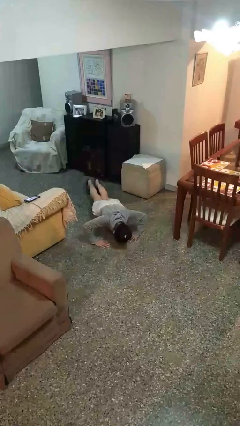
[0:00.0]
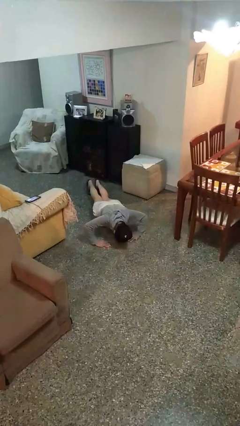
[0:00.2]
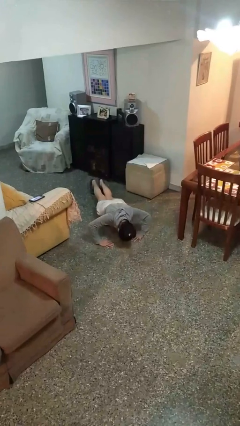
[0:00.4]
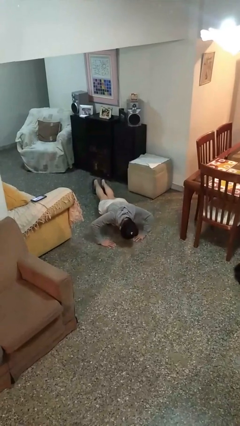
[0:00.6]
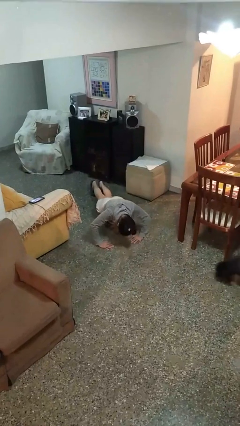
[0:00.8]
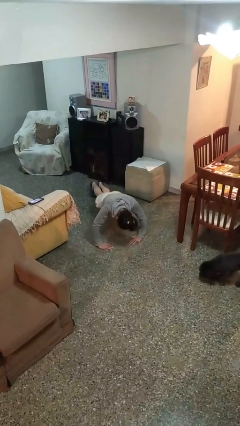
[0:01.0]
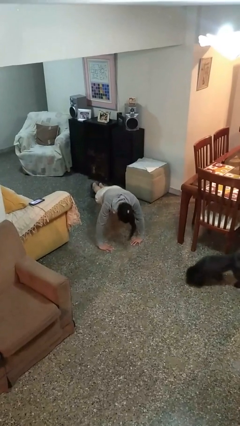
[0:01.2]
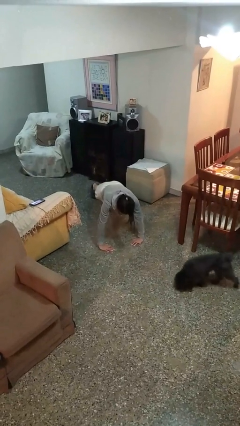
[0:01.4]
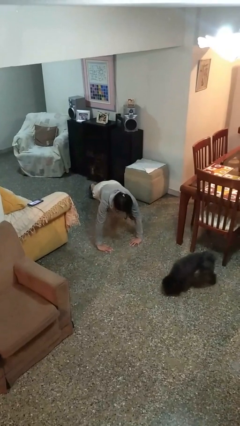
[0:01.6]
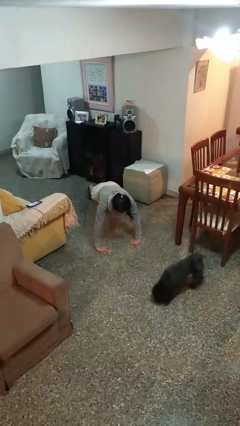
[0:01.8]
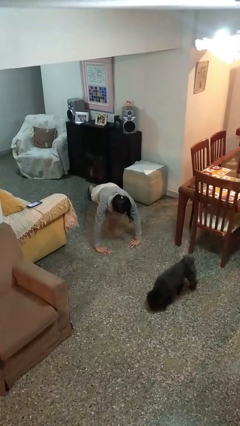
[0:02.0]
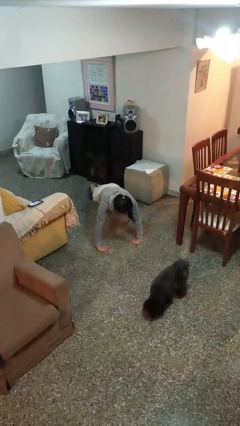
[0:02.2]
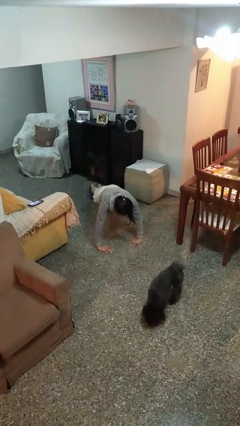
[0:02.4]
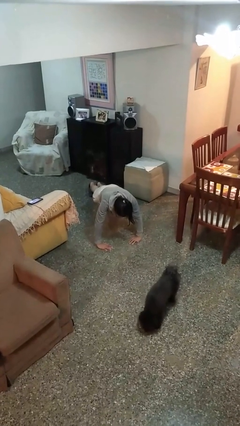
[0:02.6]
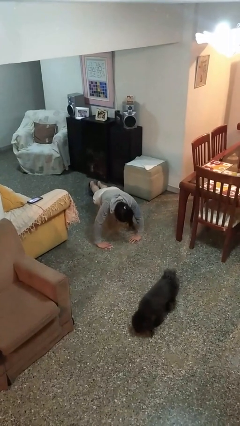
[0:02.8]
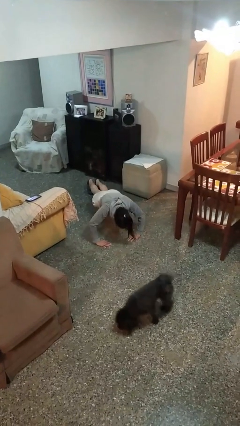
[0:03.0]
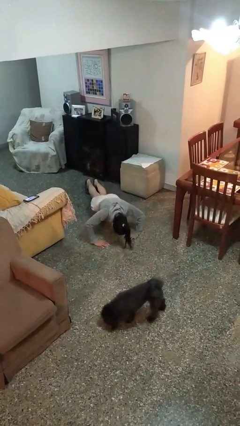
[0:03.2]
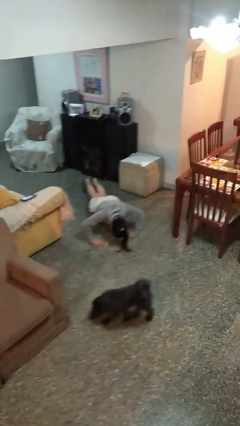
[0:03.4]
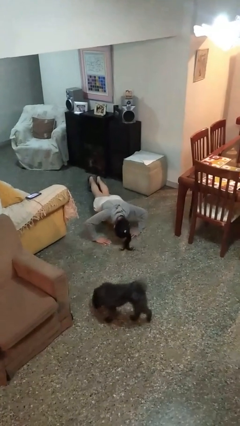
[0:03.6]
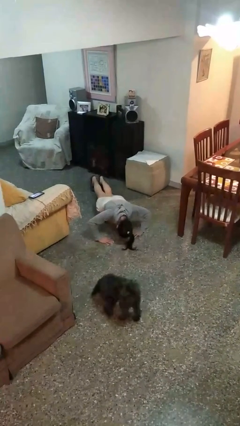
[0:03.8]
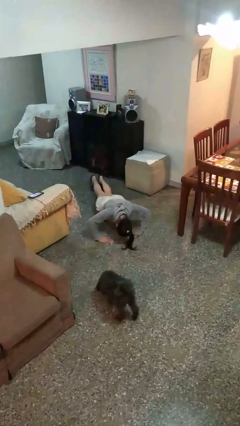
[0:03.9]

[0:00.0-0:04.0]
person exercises with pushup

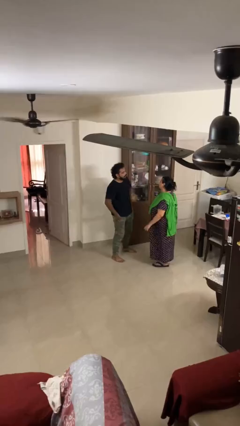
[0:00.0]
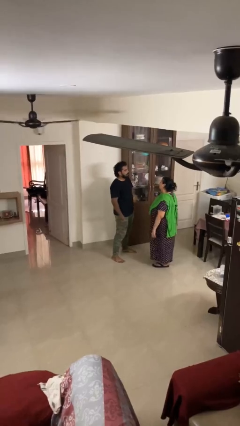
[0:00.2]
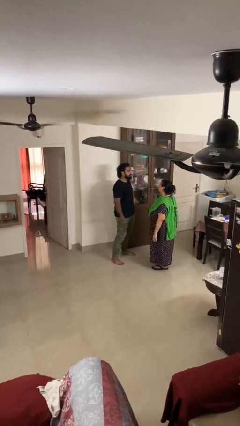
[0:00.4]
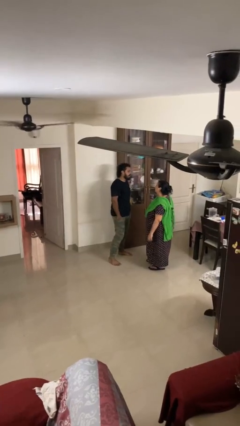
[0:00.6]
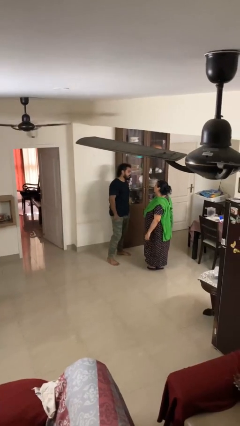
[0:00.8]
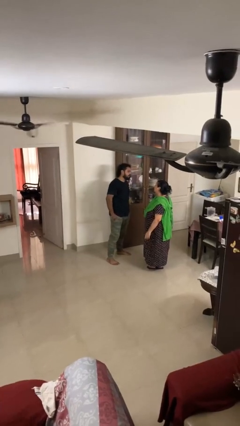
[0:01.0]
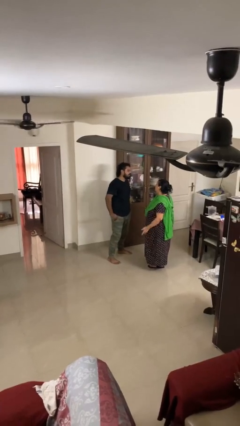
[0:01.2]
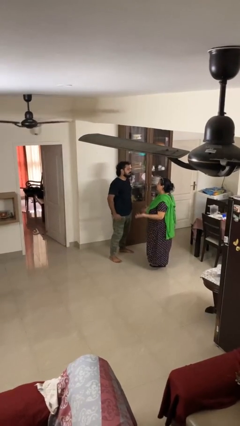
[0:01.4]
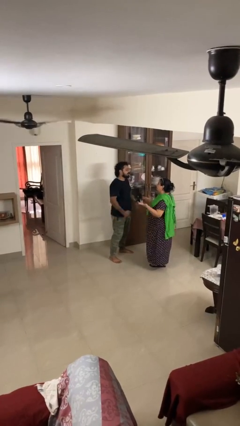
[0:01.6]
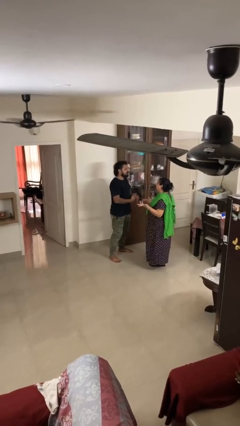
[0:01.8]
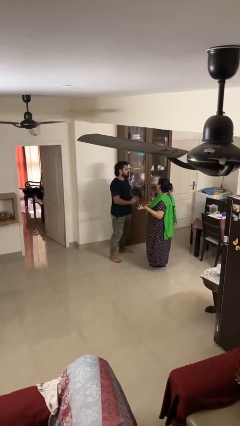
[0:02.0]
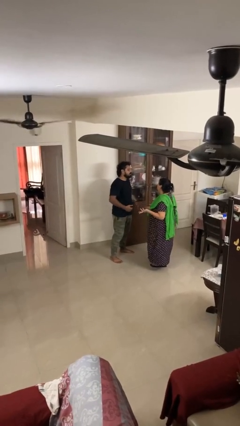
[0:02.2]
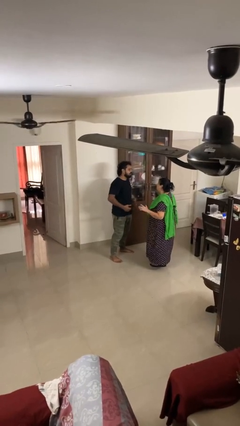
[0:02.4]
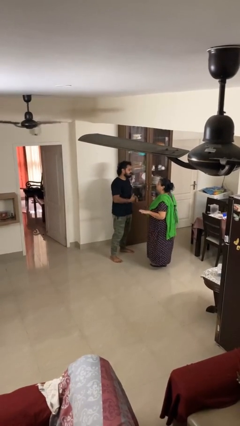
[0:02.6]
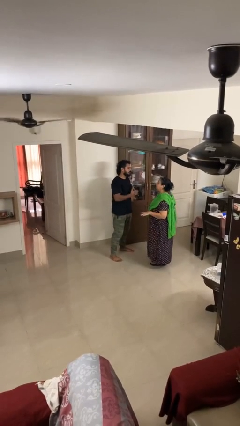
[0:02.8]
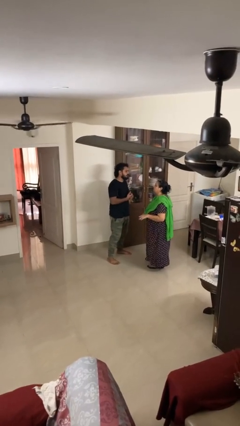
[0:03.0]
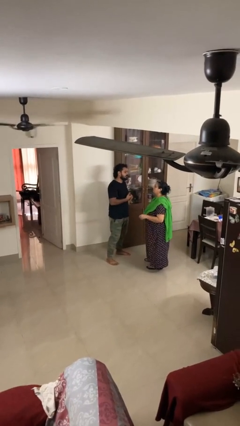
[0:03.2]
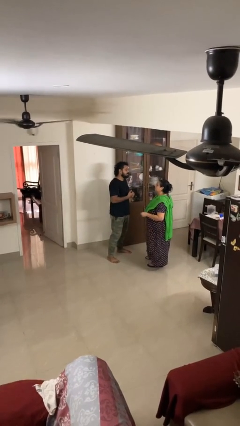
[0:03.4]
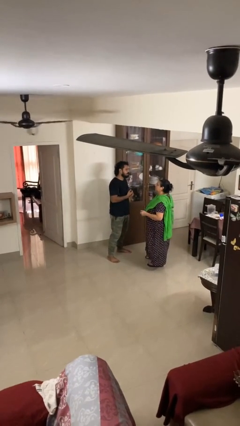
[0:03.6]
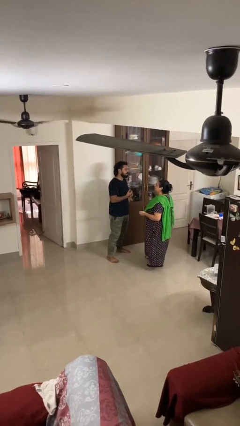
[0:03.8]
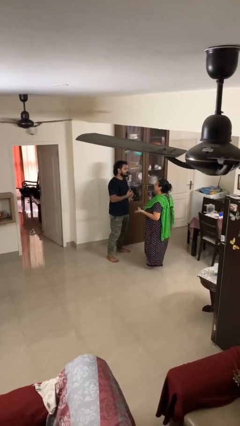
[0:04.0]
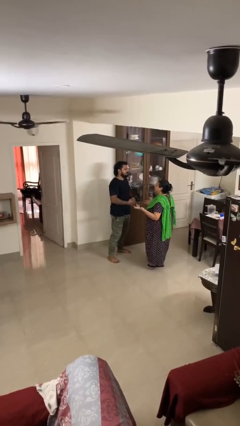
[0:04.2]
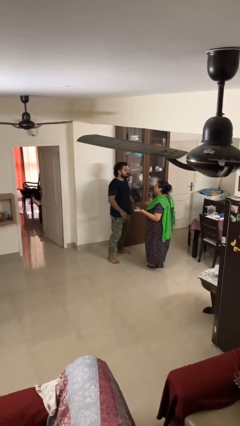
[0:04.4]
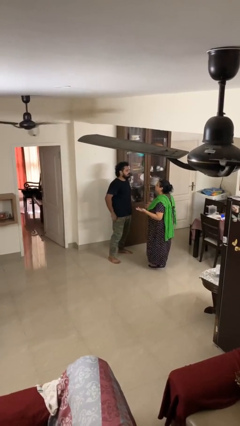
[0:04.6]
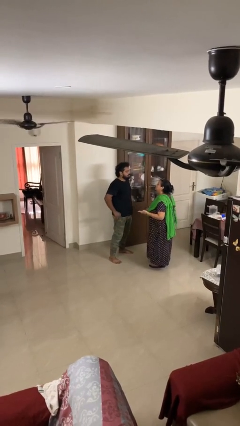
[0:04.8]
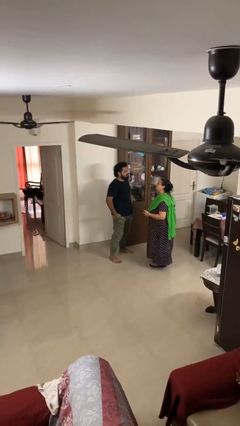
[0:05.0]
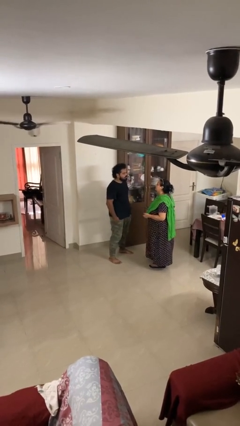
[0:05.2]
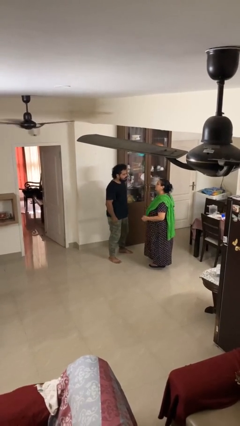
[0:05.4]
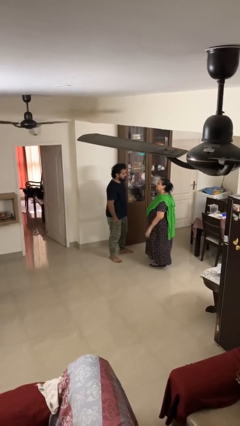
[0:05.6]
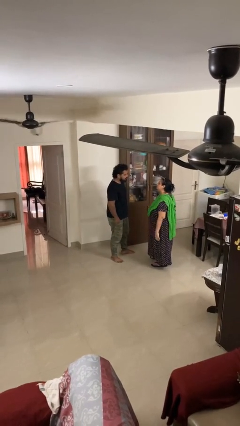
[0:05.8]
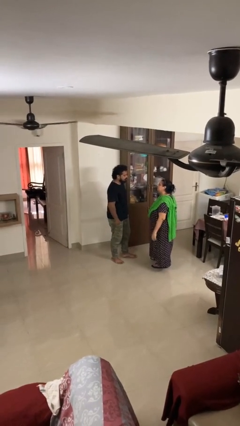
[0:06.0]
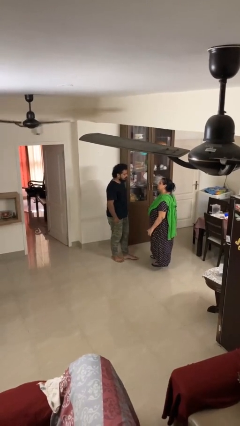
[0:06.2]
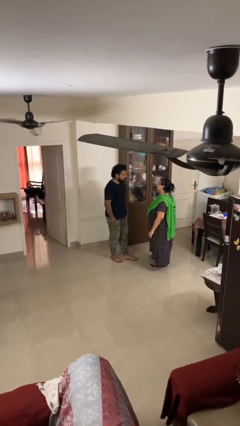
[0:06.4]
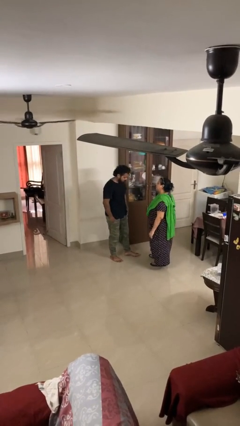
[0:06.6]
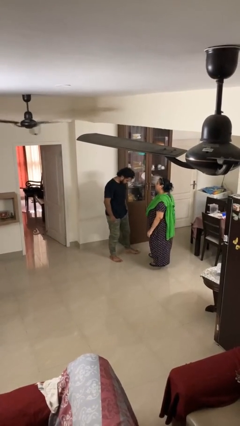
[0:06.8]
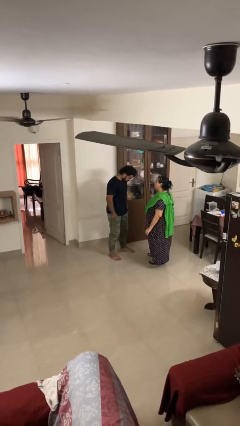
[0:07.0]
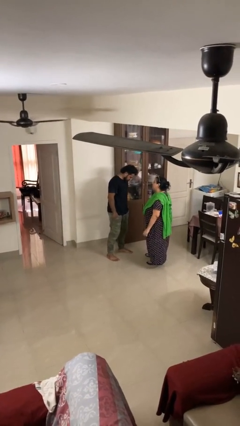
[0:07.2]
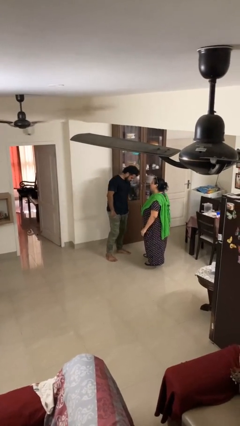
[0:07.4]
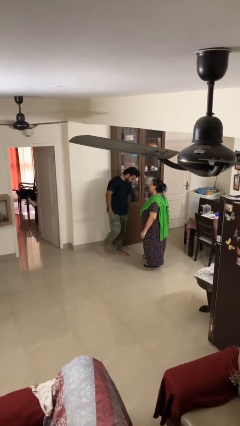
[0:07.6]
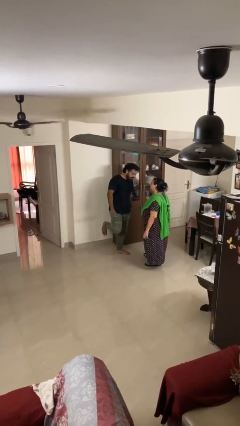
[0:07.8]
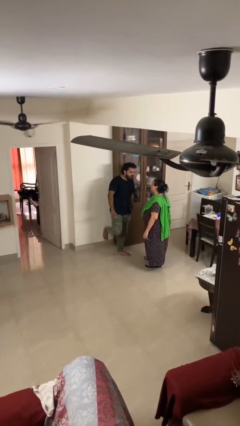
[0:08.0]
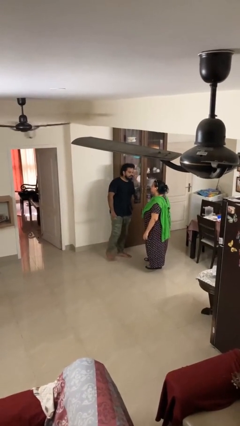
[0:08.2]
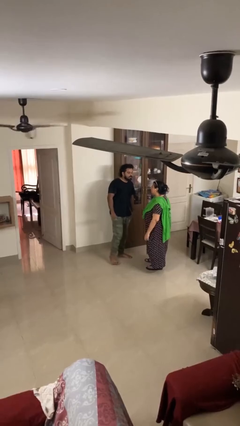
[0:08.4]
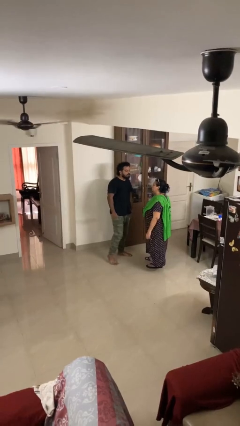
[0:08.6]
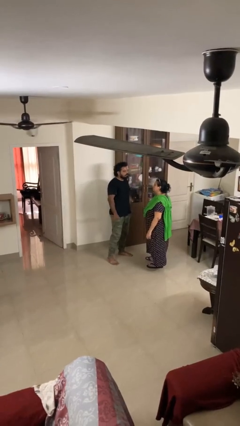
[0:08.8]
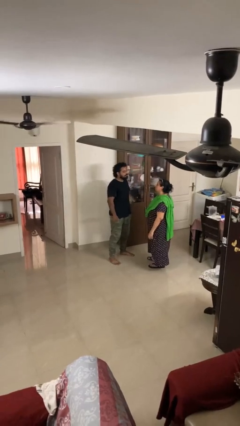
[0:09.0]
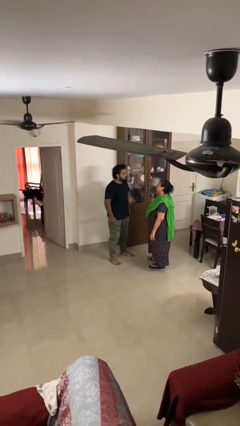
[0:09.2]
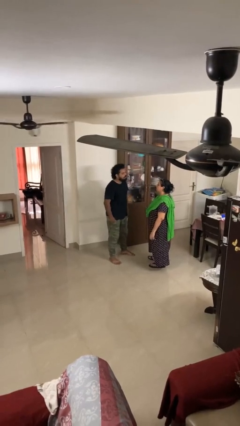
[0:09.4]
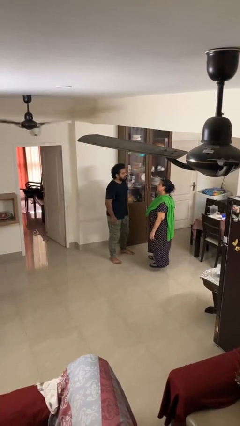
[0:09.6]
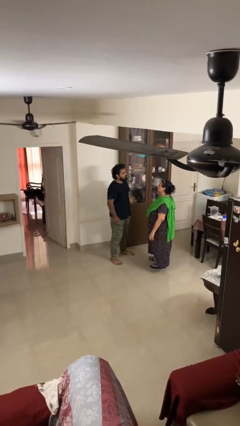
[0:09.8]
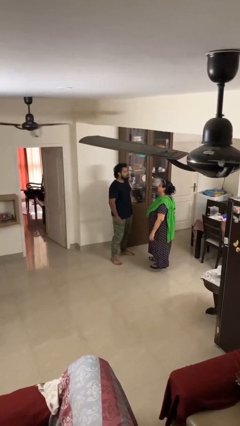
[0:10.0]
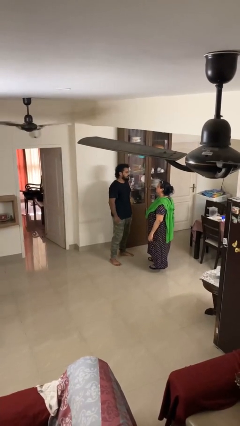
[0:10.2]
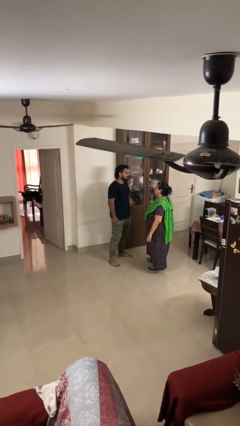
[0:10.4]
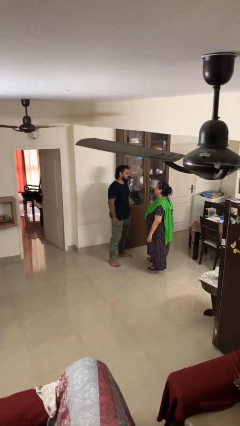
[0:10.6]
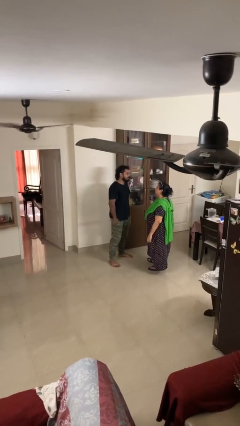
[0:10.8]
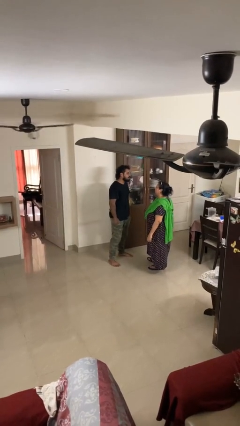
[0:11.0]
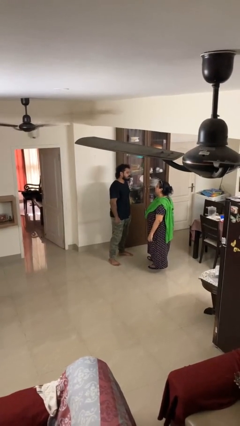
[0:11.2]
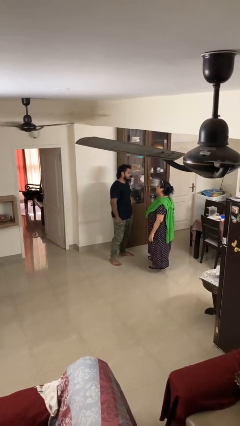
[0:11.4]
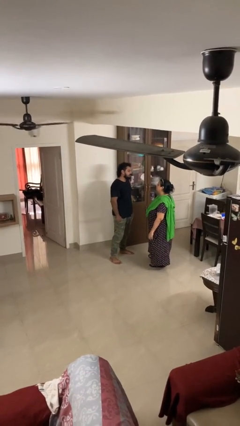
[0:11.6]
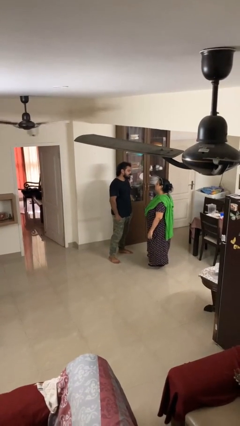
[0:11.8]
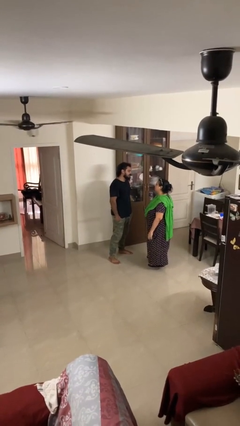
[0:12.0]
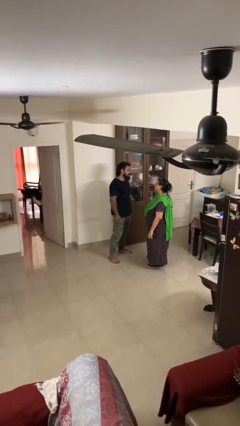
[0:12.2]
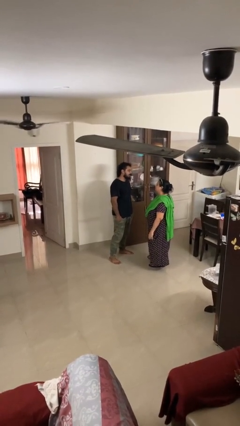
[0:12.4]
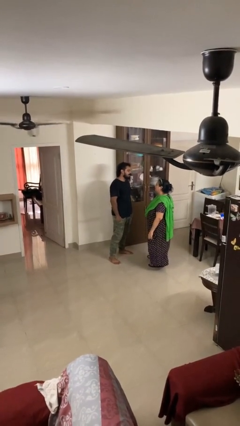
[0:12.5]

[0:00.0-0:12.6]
person talks to person

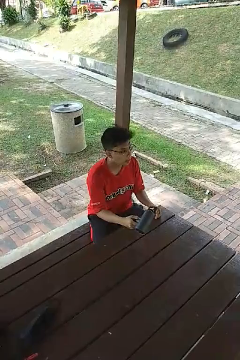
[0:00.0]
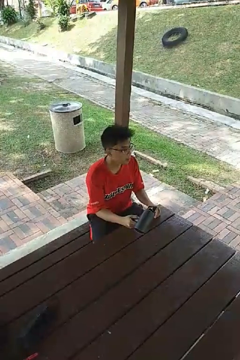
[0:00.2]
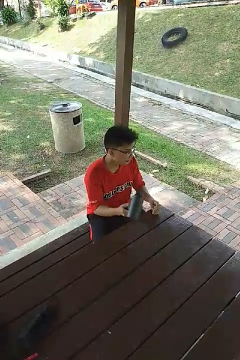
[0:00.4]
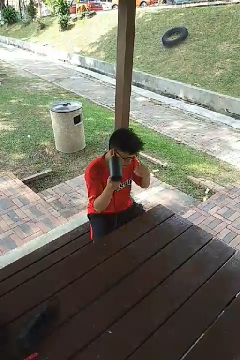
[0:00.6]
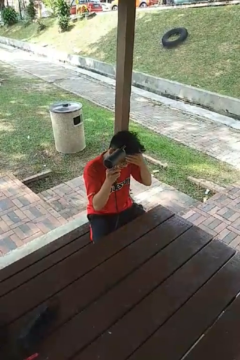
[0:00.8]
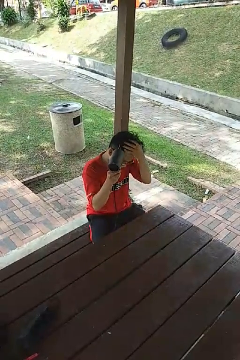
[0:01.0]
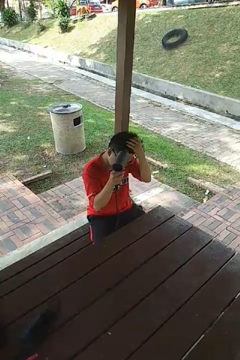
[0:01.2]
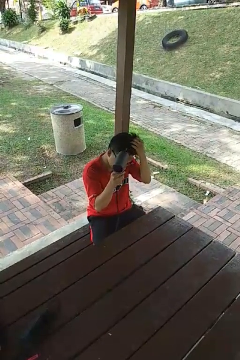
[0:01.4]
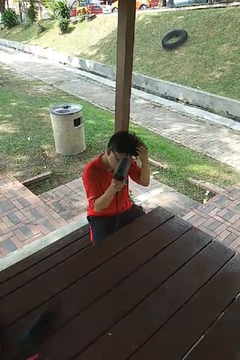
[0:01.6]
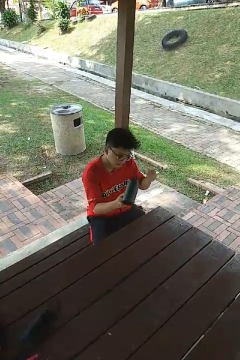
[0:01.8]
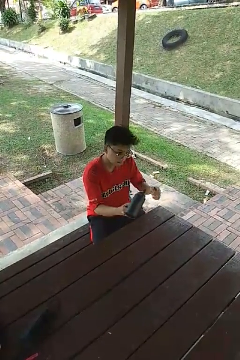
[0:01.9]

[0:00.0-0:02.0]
person dries hair with hairdryer
